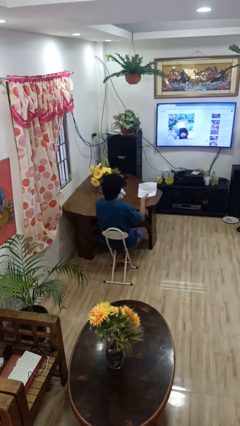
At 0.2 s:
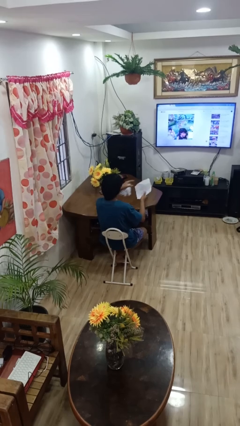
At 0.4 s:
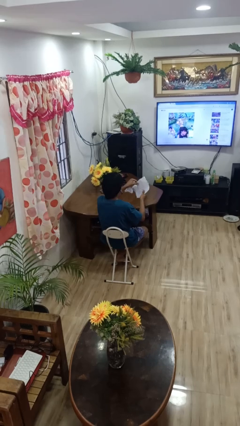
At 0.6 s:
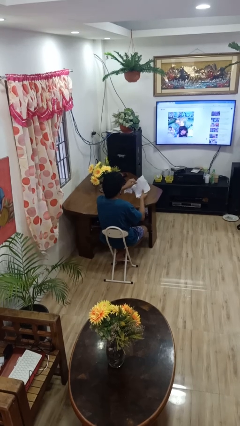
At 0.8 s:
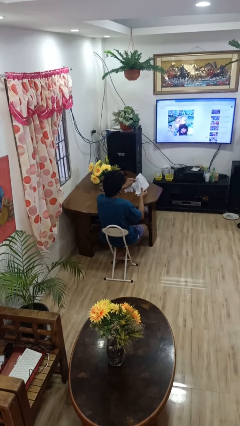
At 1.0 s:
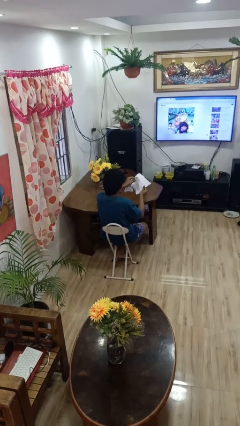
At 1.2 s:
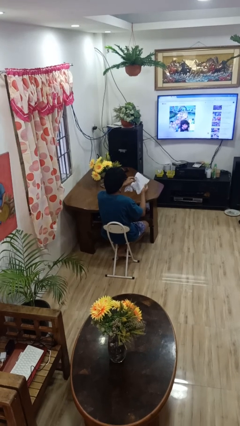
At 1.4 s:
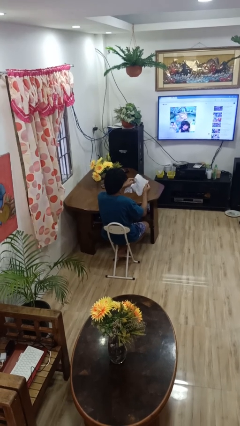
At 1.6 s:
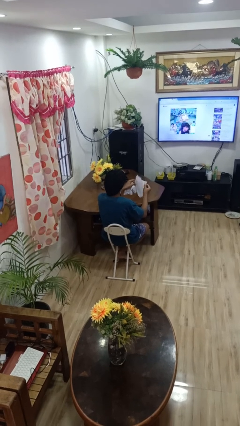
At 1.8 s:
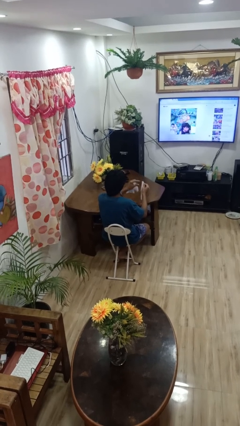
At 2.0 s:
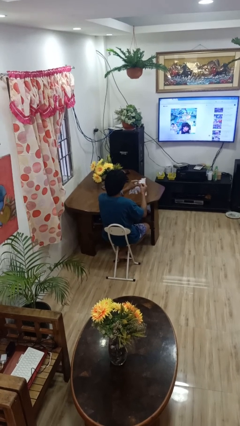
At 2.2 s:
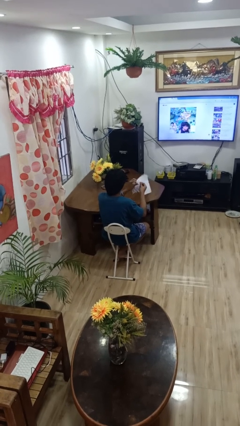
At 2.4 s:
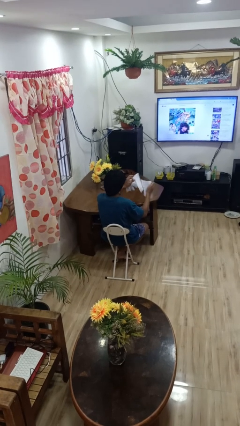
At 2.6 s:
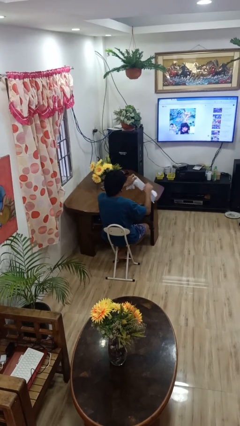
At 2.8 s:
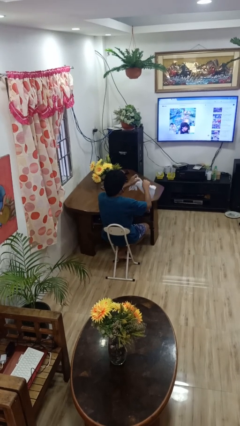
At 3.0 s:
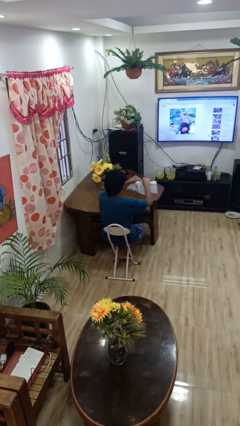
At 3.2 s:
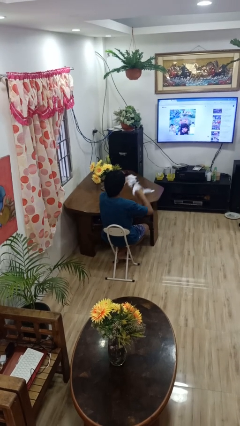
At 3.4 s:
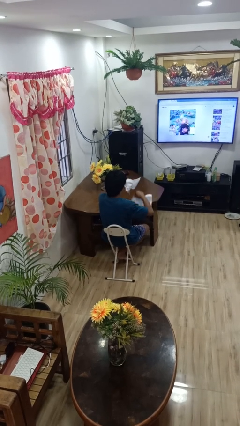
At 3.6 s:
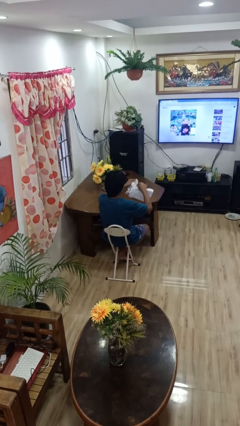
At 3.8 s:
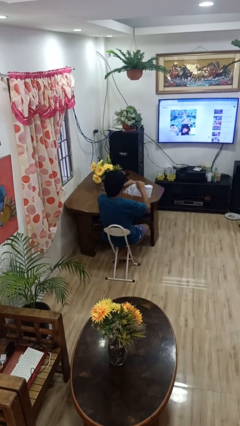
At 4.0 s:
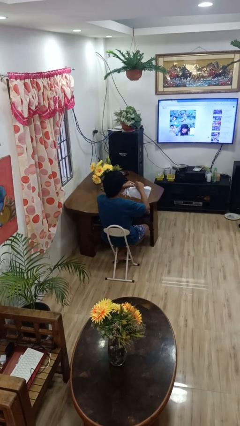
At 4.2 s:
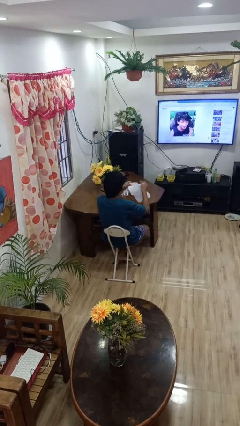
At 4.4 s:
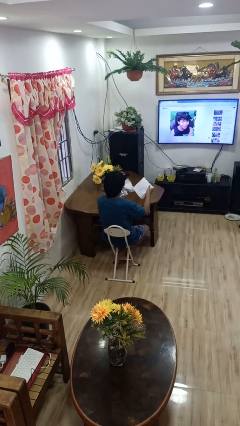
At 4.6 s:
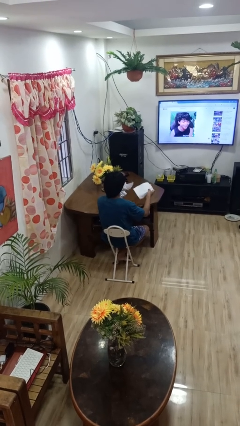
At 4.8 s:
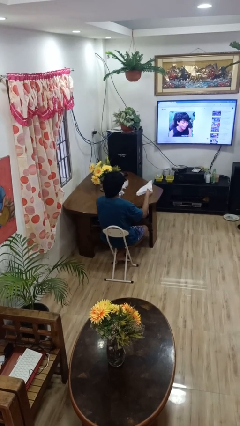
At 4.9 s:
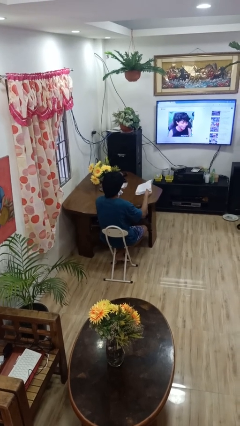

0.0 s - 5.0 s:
person tears paper

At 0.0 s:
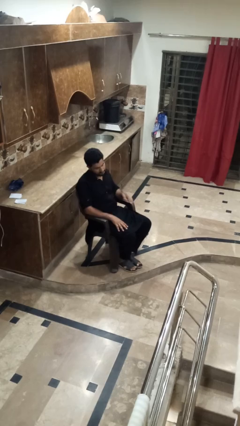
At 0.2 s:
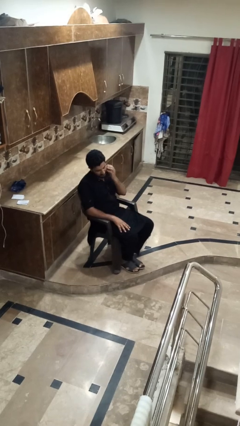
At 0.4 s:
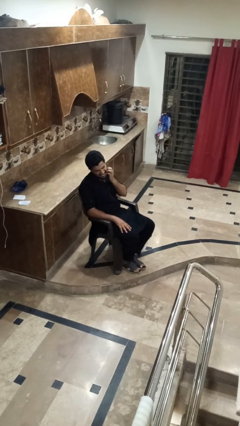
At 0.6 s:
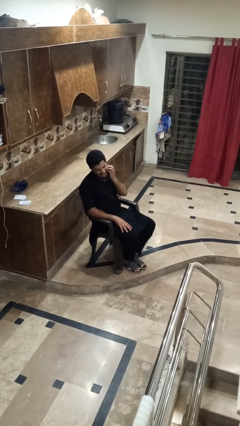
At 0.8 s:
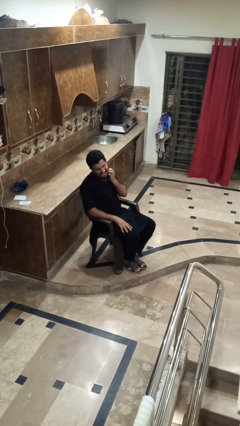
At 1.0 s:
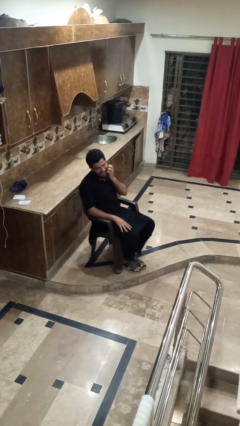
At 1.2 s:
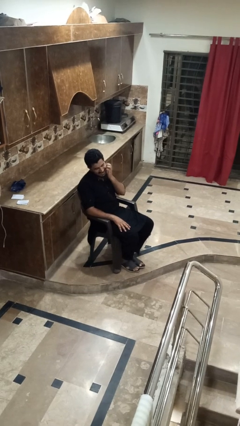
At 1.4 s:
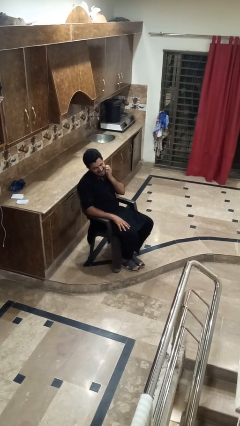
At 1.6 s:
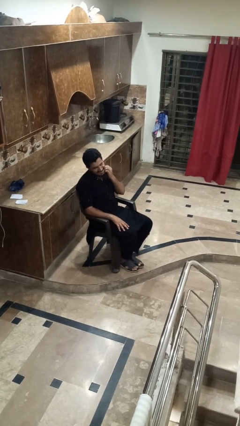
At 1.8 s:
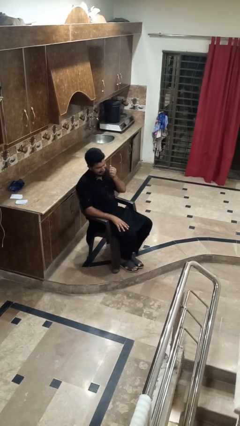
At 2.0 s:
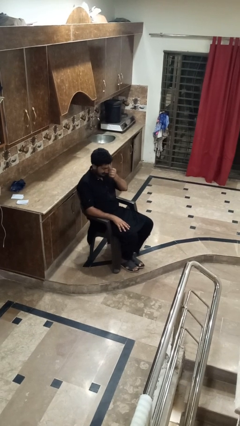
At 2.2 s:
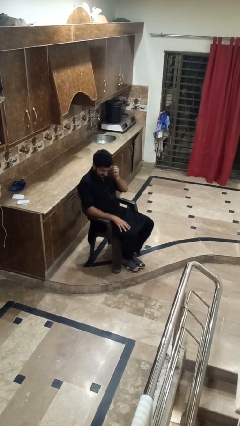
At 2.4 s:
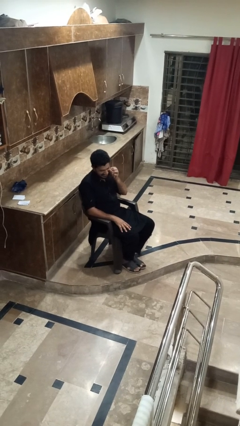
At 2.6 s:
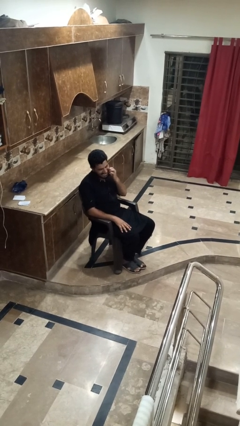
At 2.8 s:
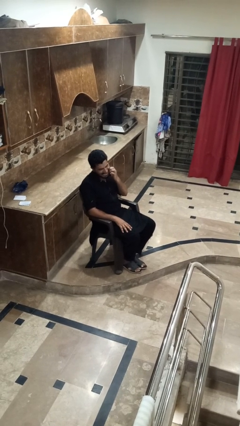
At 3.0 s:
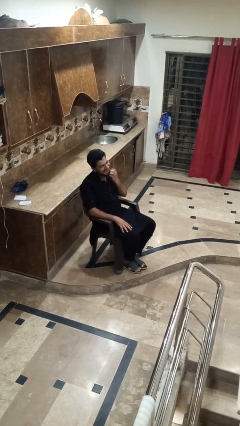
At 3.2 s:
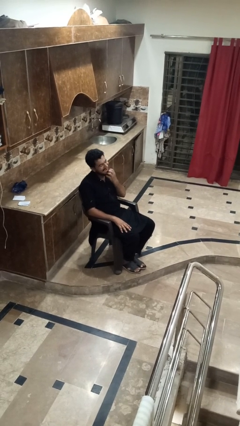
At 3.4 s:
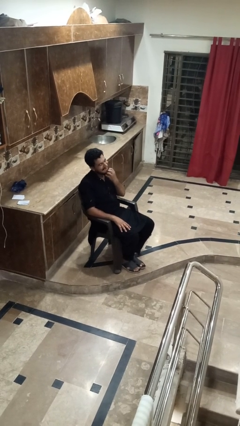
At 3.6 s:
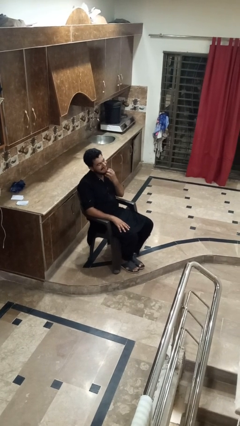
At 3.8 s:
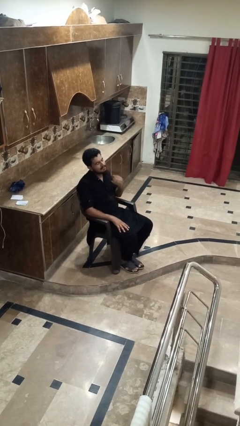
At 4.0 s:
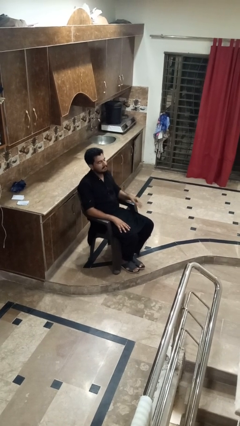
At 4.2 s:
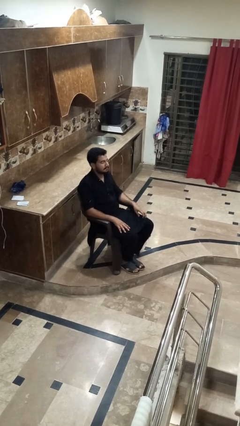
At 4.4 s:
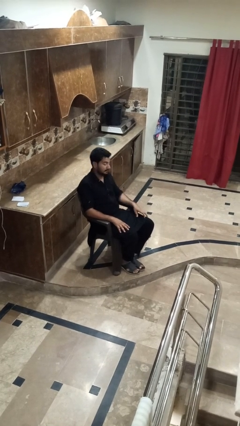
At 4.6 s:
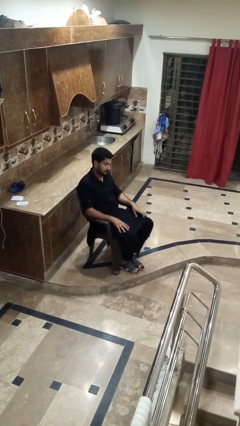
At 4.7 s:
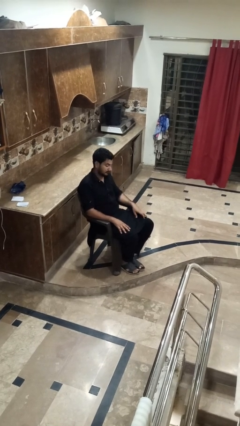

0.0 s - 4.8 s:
person scratches face

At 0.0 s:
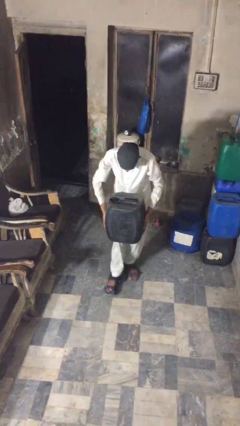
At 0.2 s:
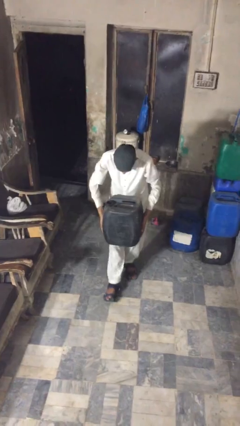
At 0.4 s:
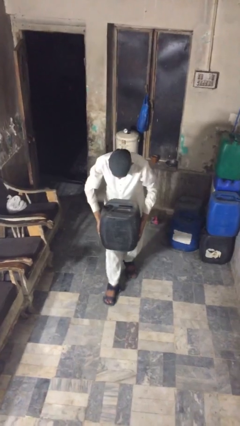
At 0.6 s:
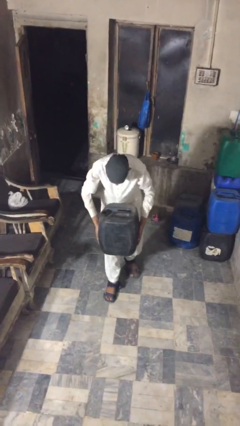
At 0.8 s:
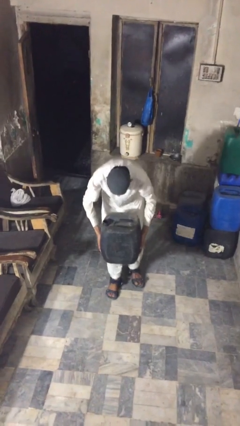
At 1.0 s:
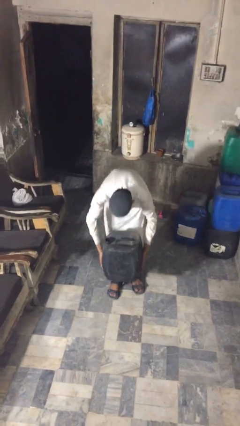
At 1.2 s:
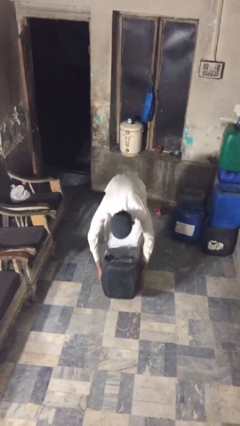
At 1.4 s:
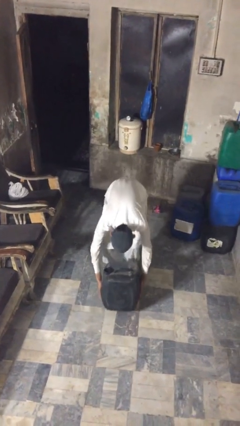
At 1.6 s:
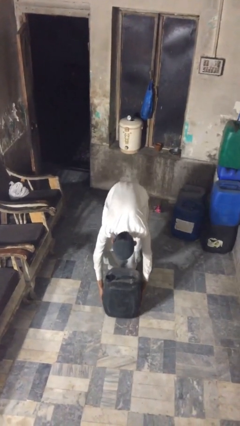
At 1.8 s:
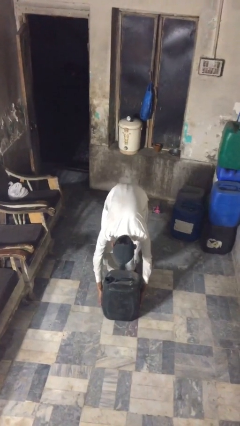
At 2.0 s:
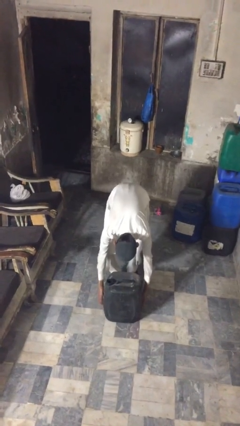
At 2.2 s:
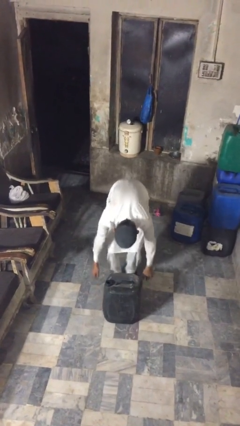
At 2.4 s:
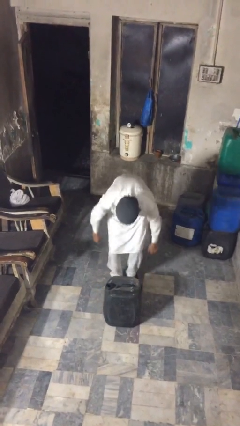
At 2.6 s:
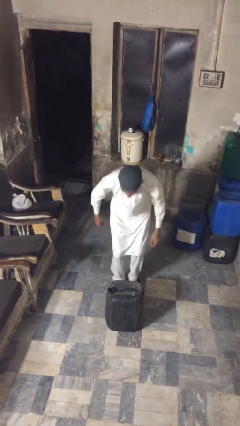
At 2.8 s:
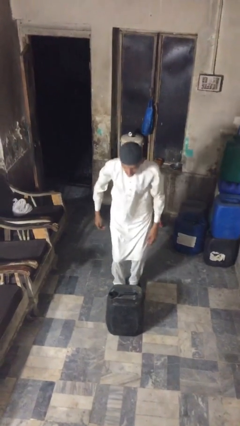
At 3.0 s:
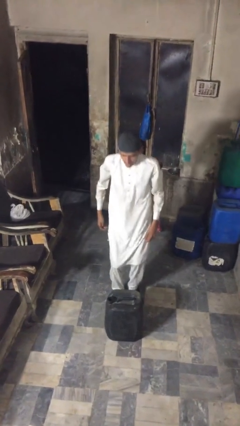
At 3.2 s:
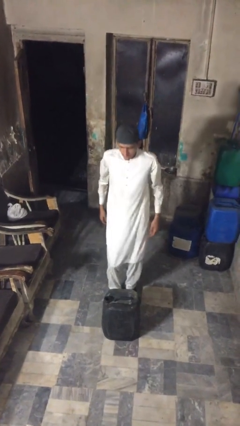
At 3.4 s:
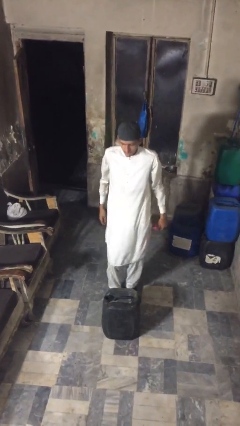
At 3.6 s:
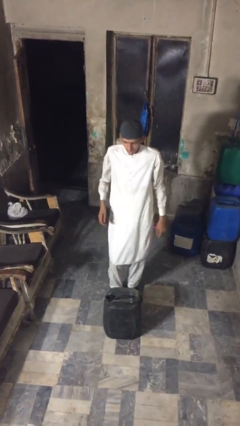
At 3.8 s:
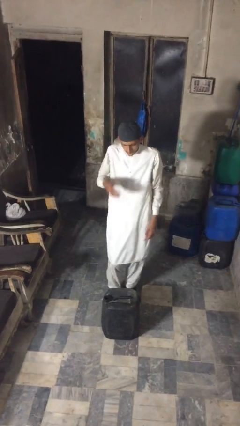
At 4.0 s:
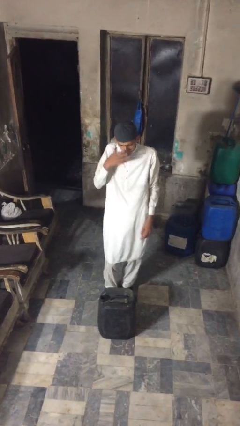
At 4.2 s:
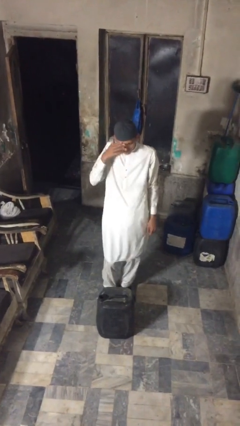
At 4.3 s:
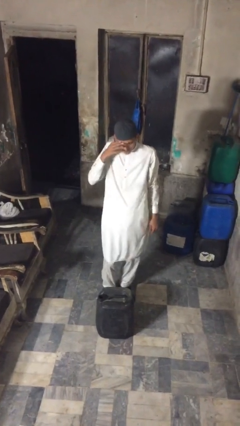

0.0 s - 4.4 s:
person puts down object on floor

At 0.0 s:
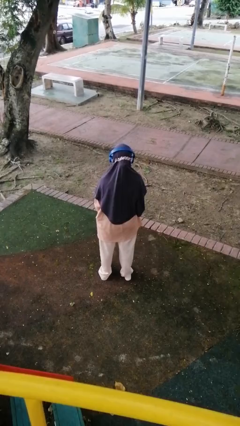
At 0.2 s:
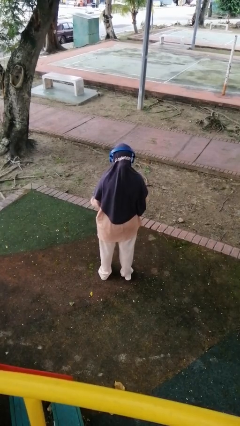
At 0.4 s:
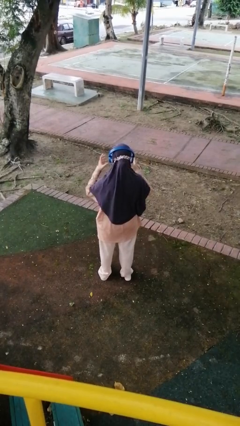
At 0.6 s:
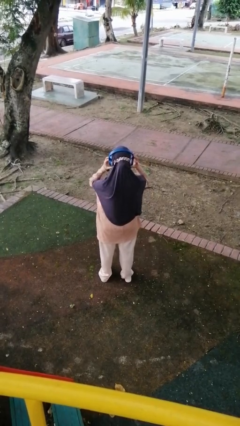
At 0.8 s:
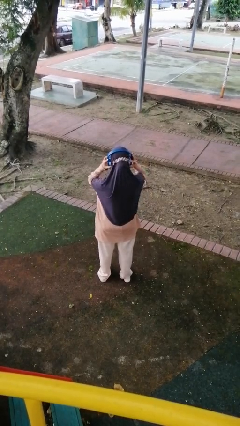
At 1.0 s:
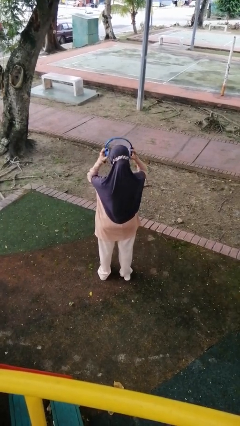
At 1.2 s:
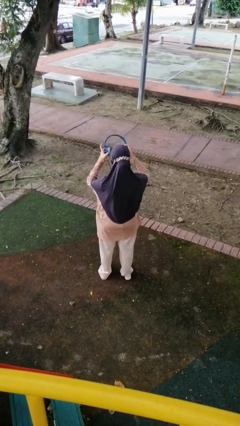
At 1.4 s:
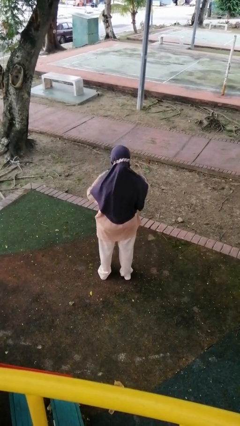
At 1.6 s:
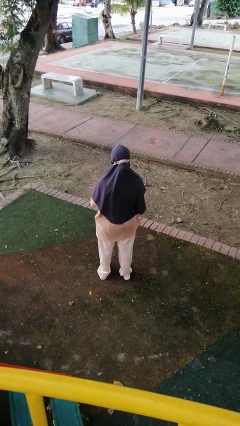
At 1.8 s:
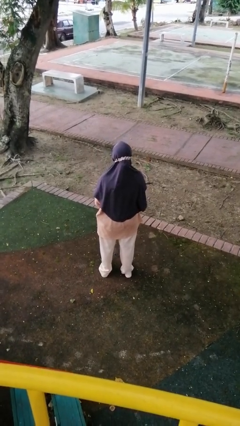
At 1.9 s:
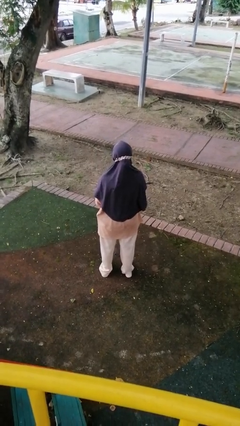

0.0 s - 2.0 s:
person takes off headphones

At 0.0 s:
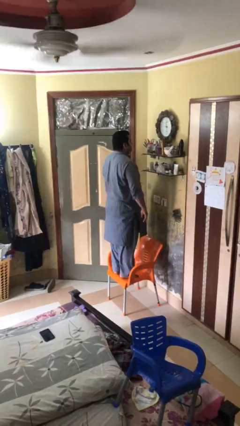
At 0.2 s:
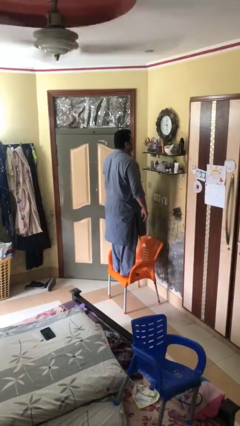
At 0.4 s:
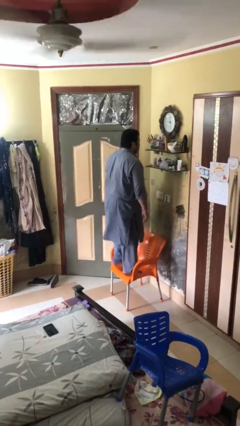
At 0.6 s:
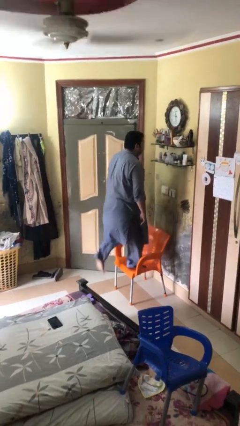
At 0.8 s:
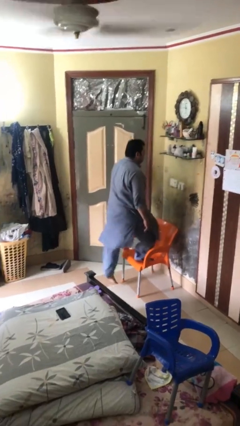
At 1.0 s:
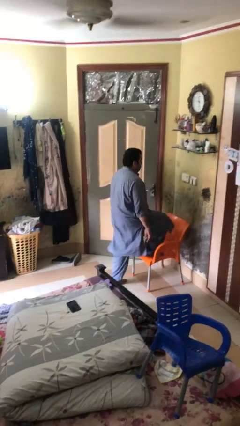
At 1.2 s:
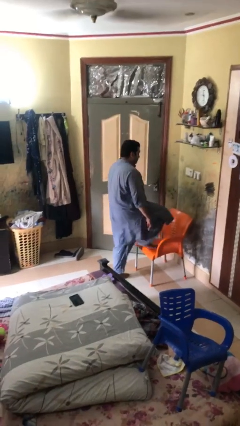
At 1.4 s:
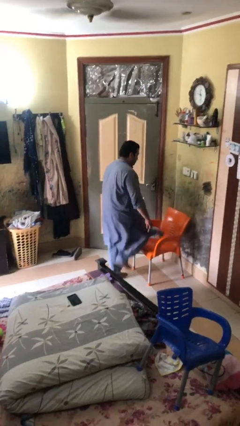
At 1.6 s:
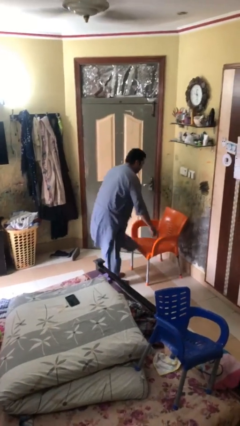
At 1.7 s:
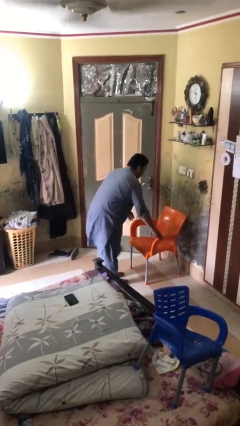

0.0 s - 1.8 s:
person climbs off chair
